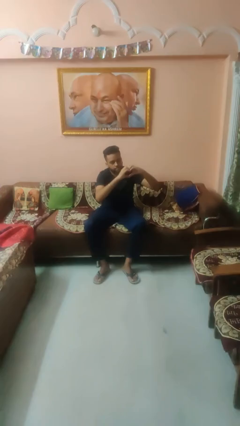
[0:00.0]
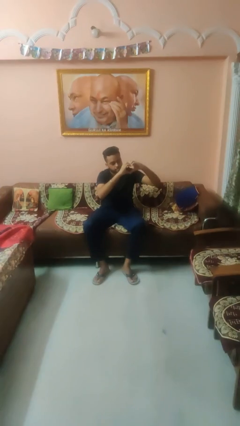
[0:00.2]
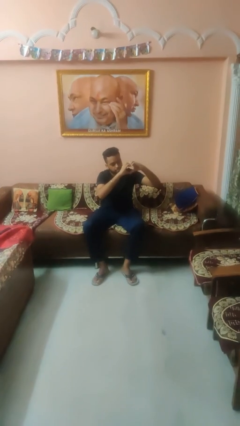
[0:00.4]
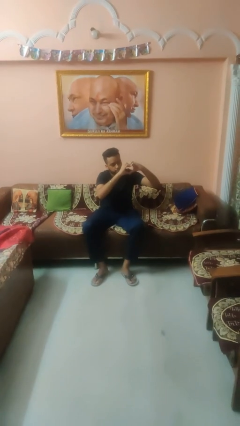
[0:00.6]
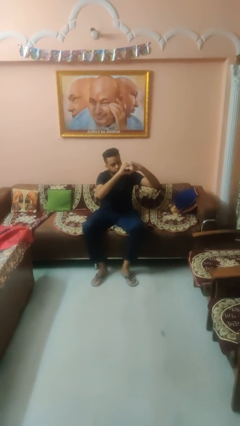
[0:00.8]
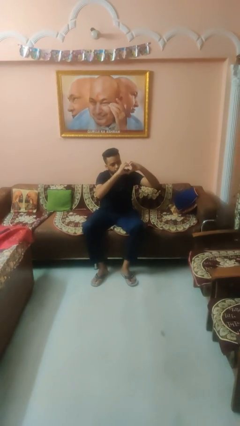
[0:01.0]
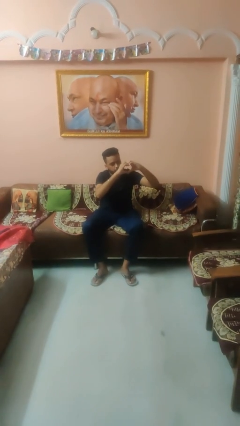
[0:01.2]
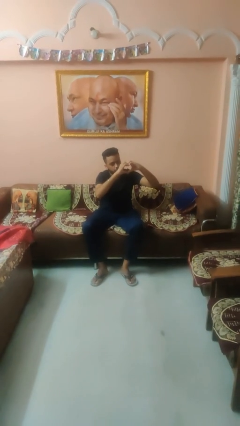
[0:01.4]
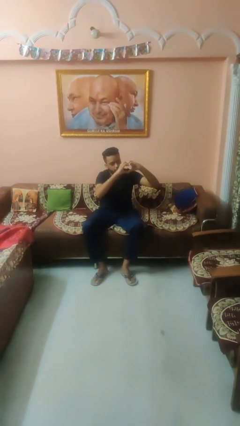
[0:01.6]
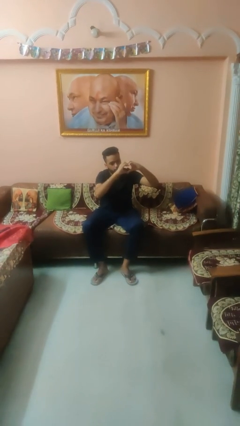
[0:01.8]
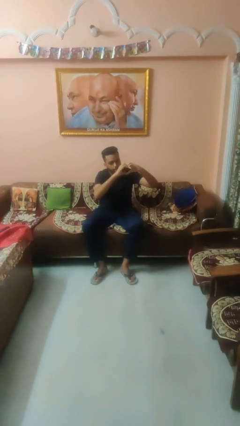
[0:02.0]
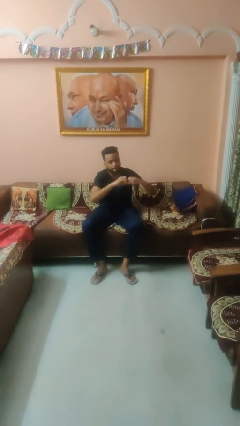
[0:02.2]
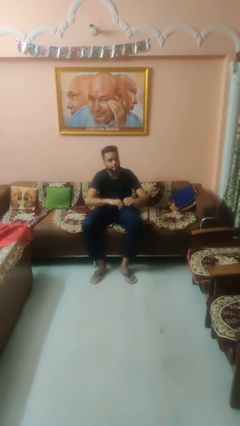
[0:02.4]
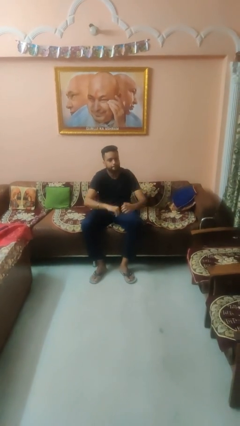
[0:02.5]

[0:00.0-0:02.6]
person gestures heart

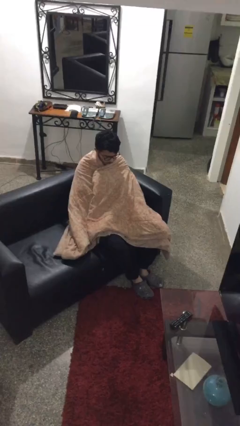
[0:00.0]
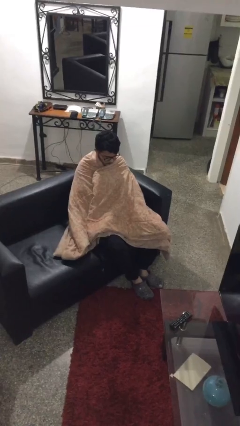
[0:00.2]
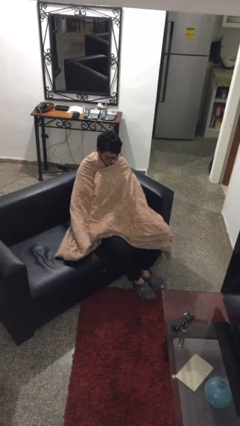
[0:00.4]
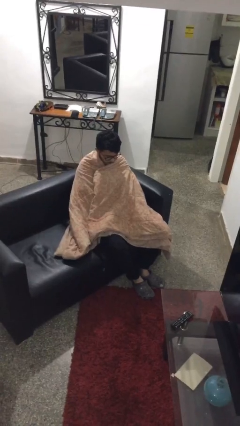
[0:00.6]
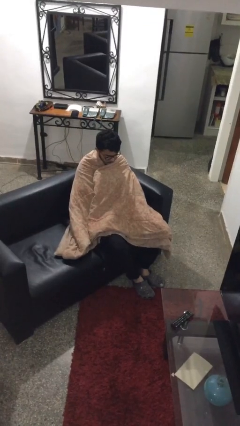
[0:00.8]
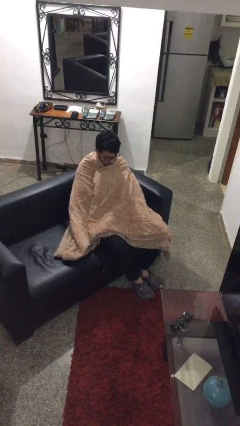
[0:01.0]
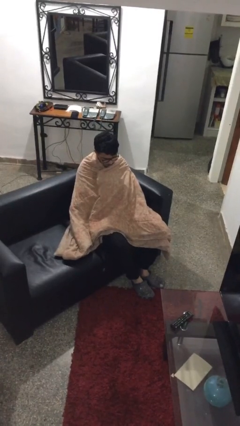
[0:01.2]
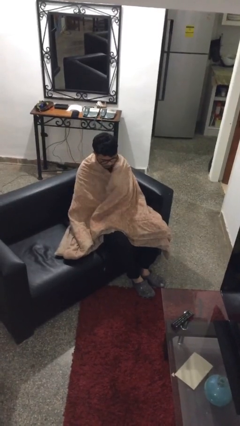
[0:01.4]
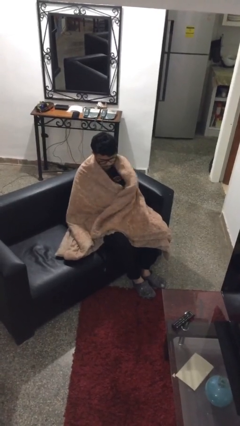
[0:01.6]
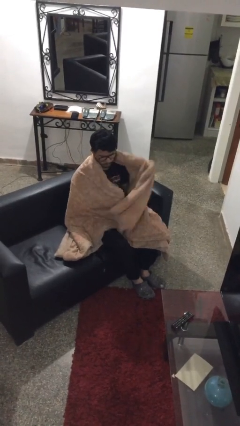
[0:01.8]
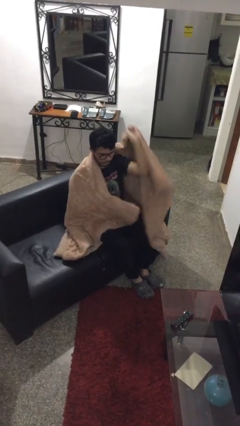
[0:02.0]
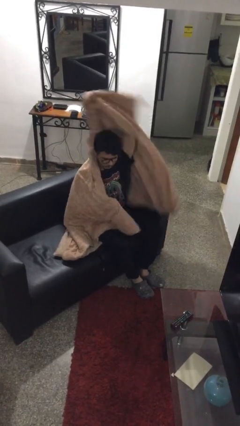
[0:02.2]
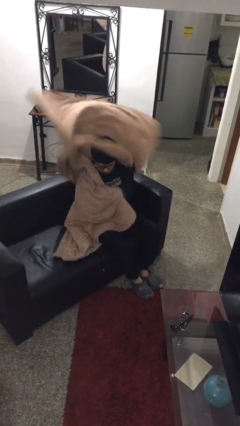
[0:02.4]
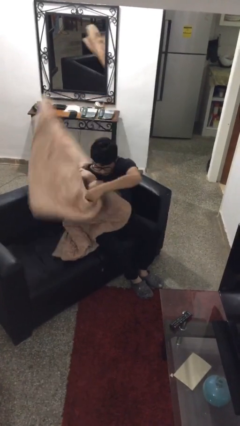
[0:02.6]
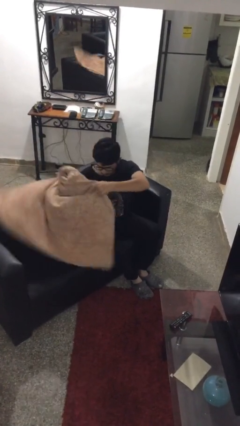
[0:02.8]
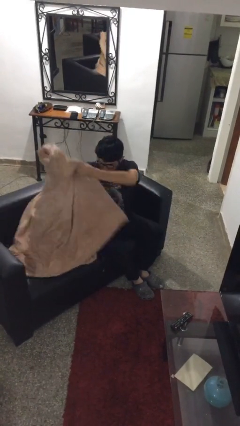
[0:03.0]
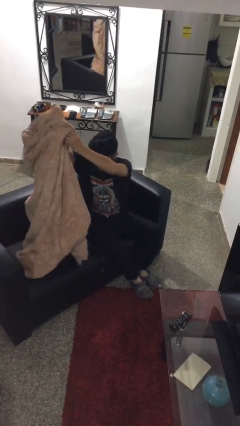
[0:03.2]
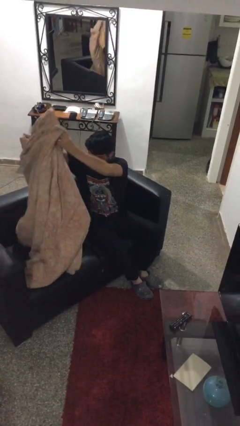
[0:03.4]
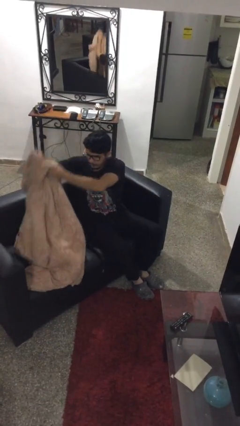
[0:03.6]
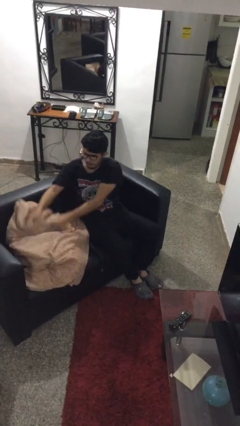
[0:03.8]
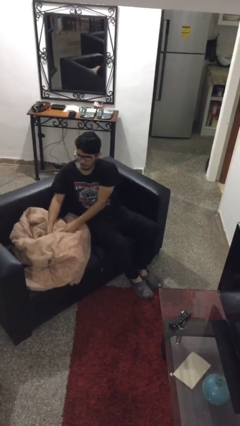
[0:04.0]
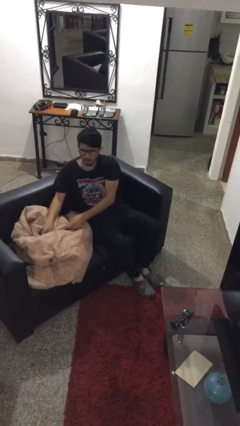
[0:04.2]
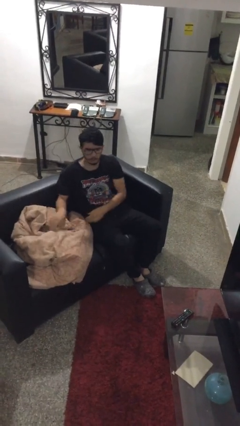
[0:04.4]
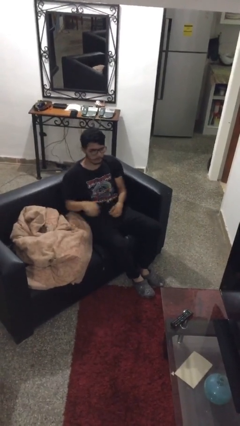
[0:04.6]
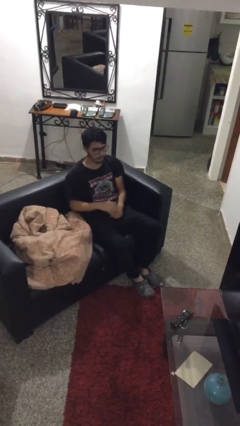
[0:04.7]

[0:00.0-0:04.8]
person uncovers with blanket

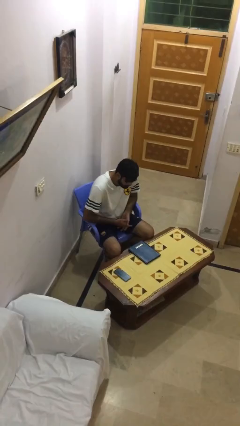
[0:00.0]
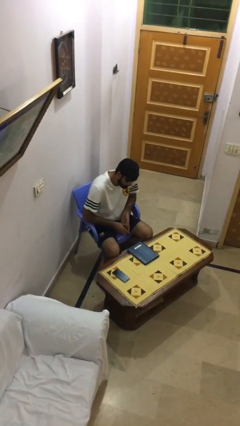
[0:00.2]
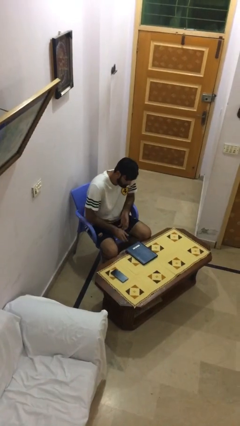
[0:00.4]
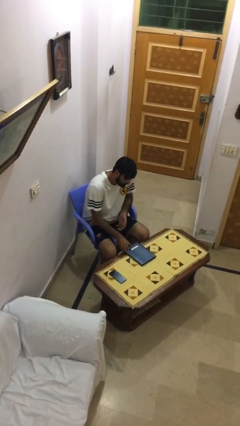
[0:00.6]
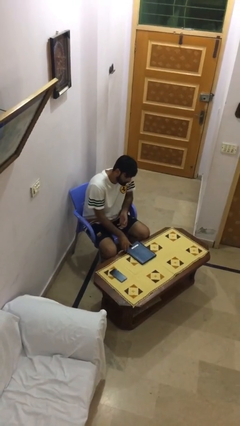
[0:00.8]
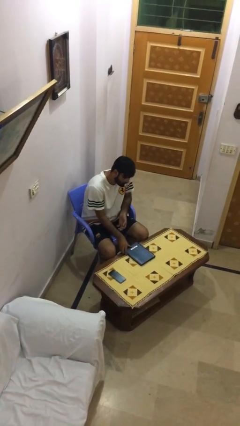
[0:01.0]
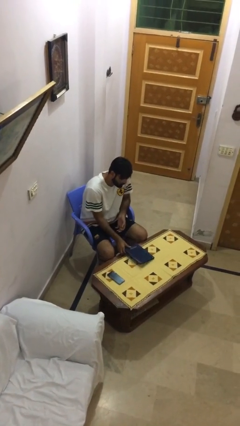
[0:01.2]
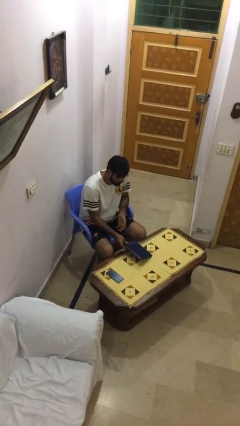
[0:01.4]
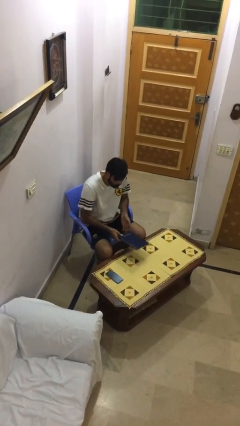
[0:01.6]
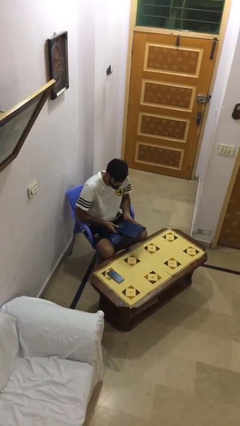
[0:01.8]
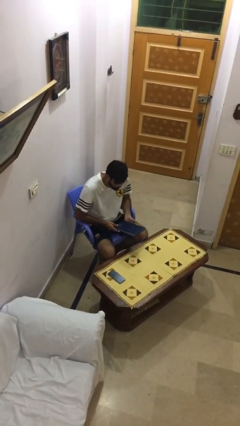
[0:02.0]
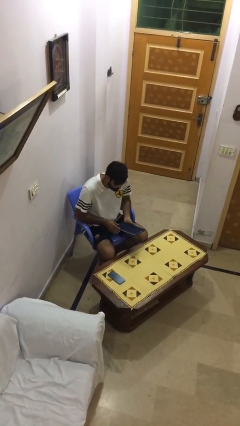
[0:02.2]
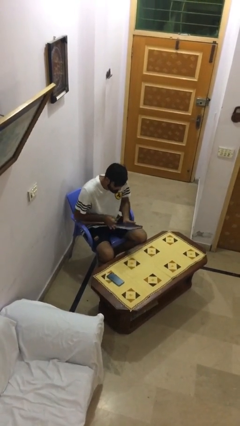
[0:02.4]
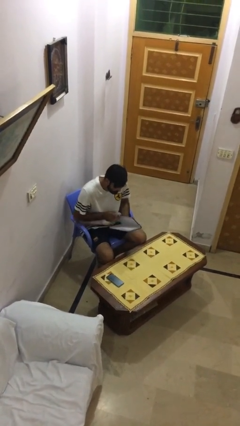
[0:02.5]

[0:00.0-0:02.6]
person picks up object from table

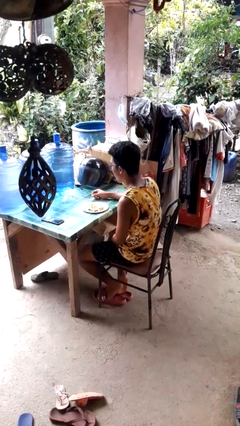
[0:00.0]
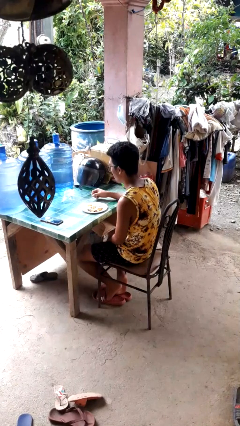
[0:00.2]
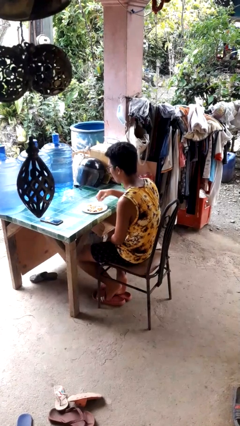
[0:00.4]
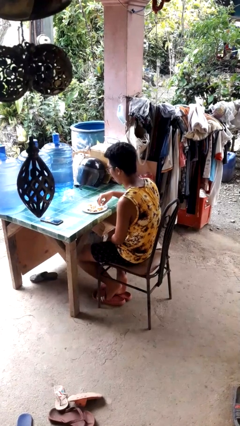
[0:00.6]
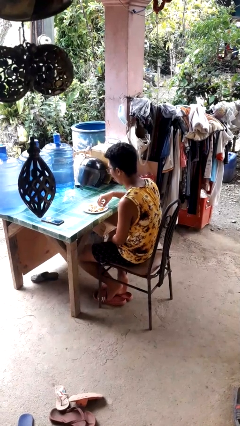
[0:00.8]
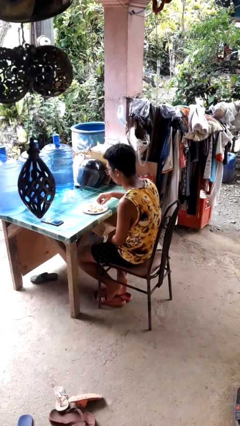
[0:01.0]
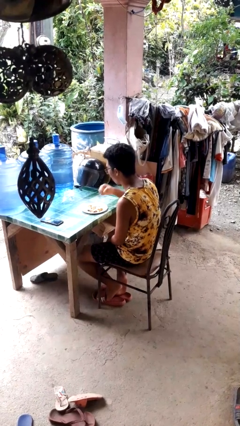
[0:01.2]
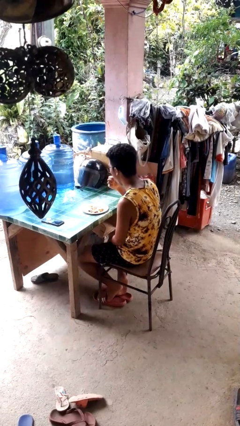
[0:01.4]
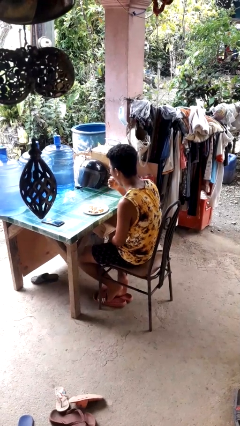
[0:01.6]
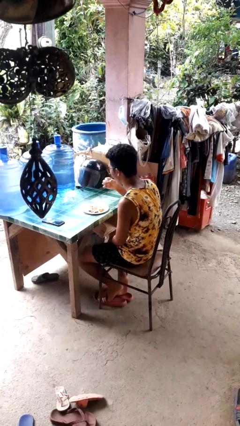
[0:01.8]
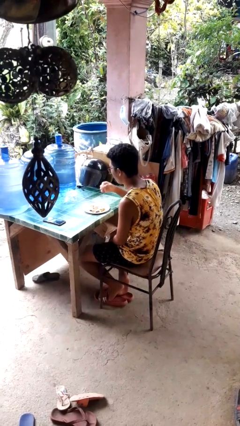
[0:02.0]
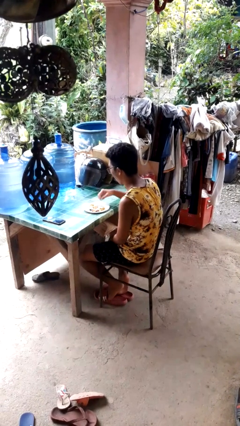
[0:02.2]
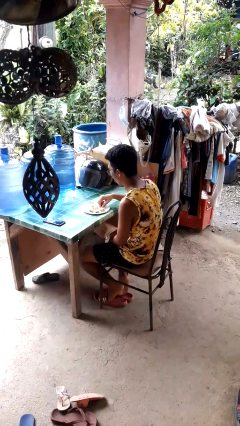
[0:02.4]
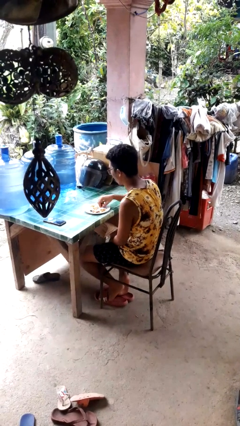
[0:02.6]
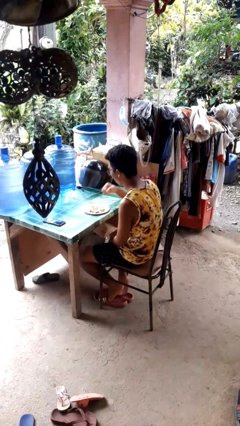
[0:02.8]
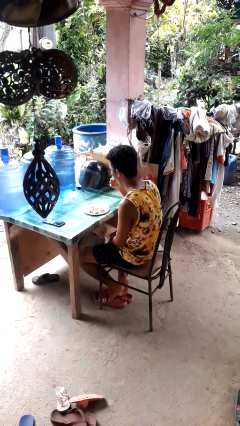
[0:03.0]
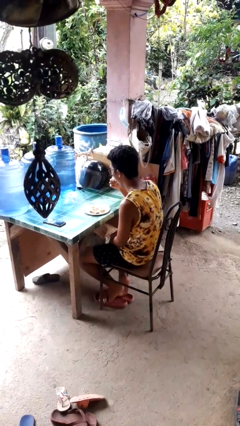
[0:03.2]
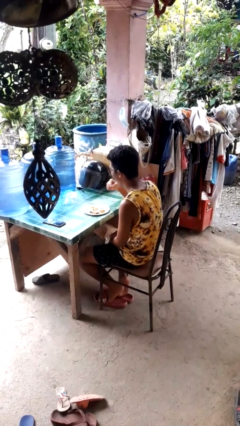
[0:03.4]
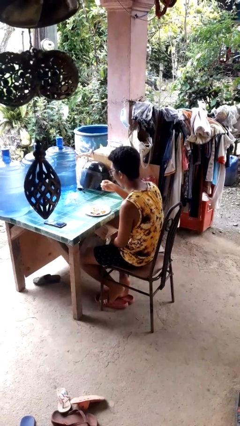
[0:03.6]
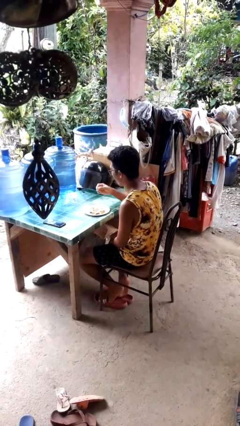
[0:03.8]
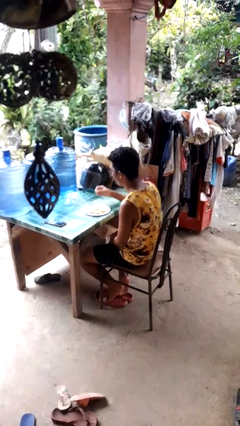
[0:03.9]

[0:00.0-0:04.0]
person eats with hands

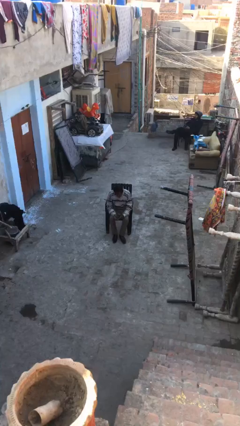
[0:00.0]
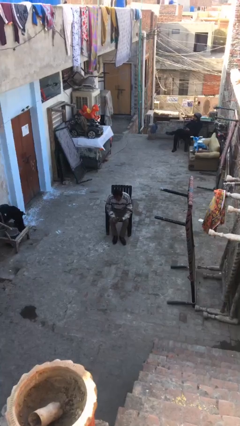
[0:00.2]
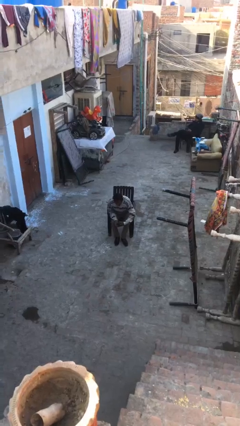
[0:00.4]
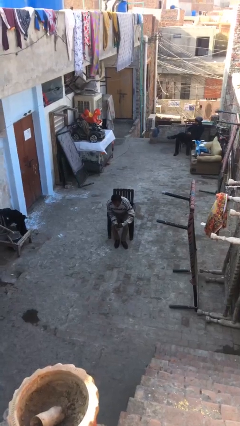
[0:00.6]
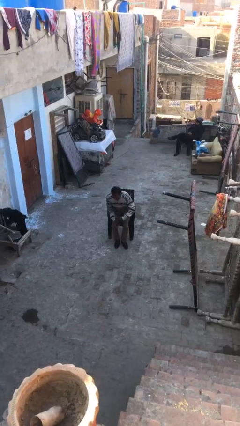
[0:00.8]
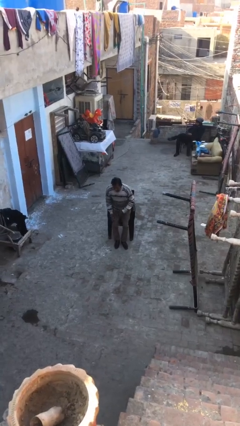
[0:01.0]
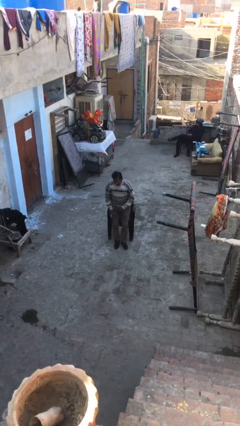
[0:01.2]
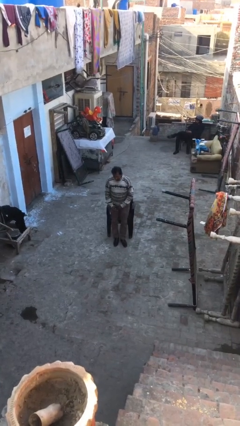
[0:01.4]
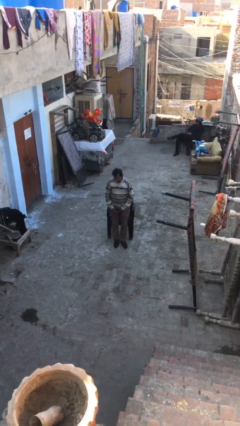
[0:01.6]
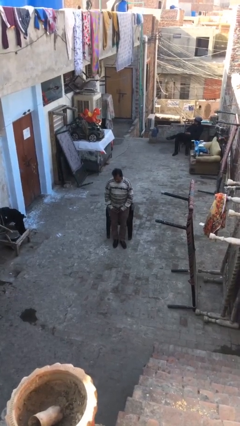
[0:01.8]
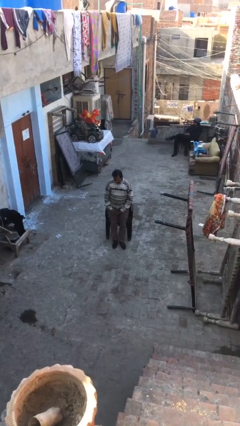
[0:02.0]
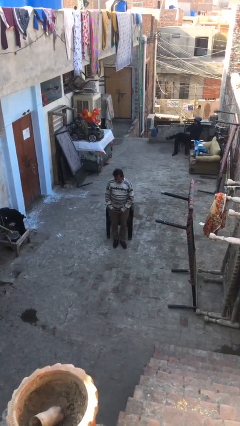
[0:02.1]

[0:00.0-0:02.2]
person stands up

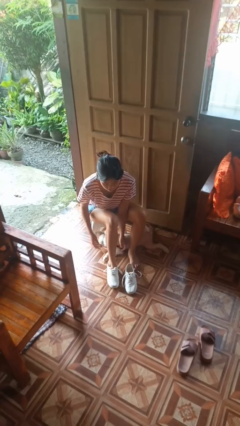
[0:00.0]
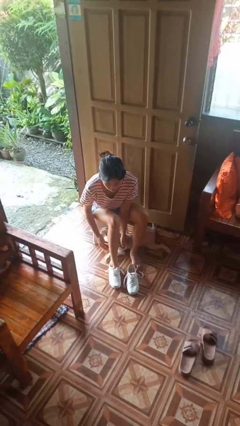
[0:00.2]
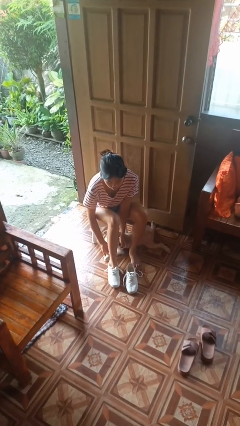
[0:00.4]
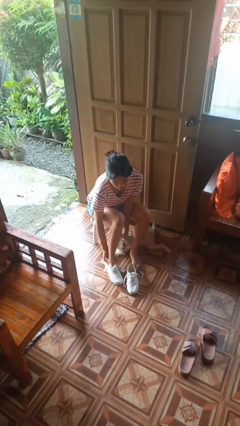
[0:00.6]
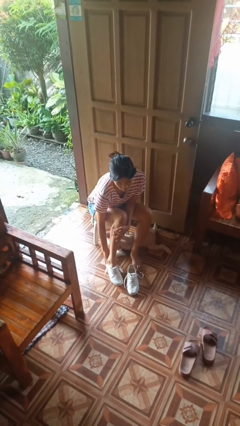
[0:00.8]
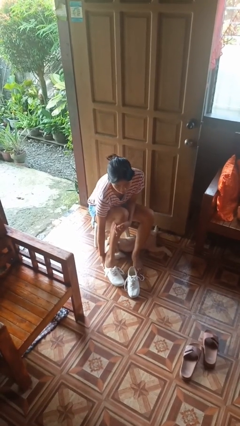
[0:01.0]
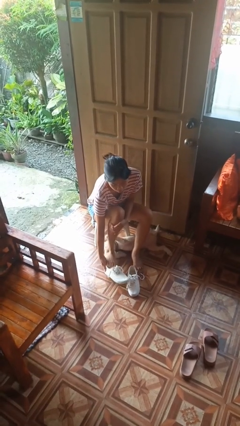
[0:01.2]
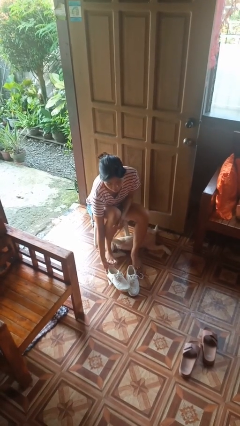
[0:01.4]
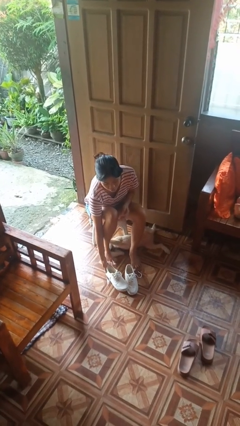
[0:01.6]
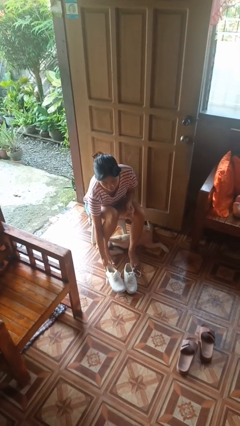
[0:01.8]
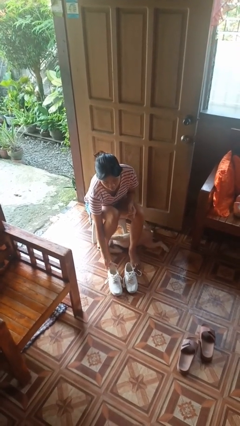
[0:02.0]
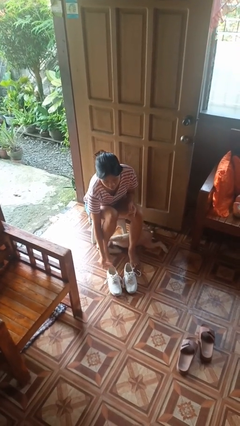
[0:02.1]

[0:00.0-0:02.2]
person takes off shoes
